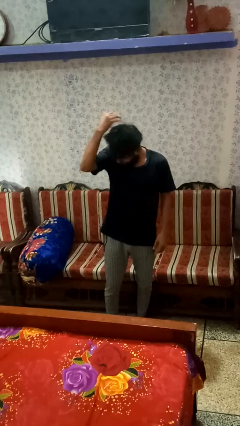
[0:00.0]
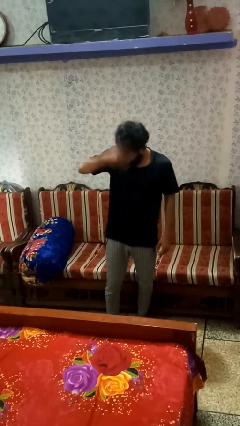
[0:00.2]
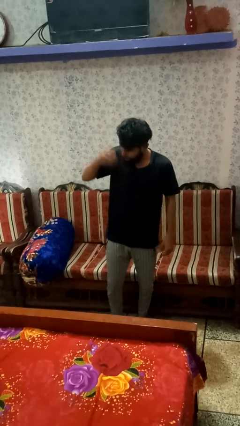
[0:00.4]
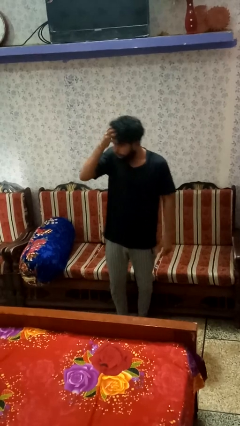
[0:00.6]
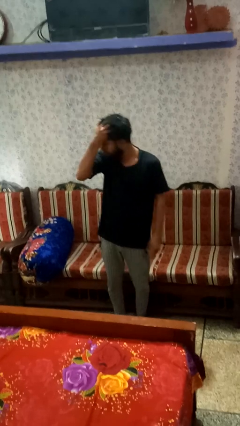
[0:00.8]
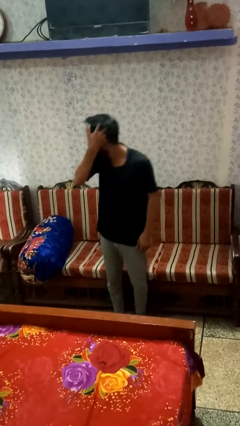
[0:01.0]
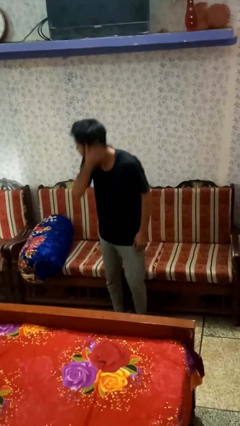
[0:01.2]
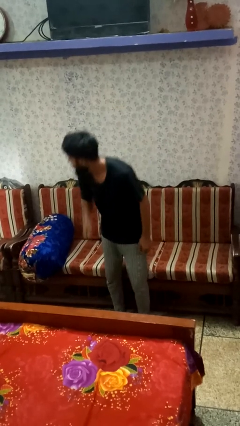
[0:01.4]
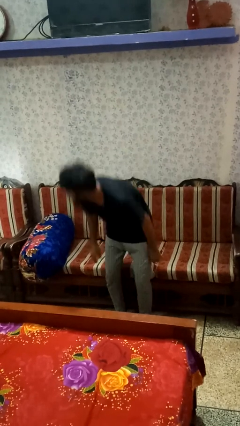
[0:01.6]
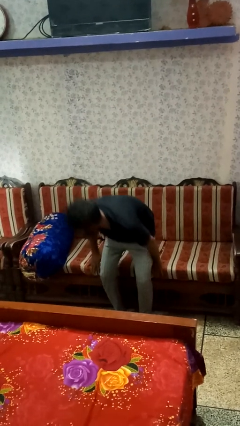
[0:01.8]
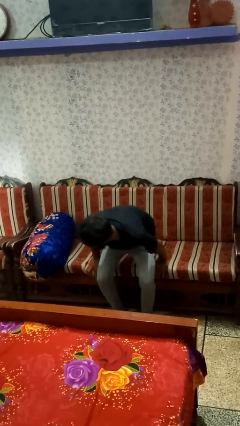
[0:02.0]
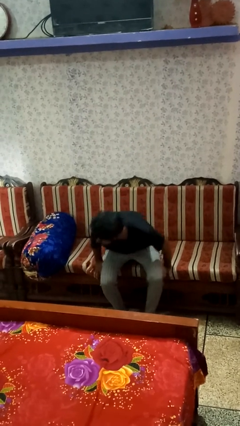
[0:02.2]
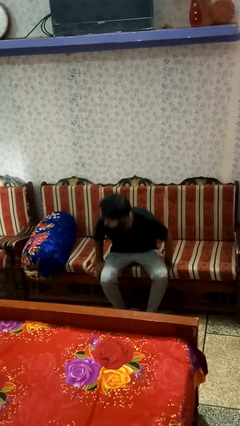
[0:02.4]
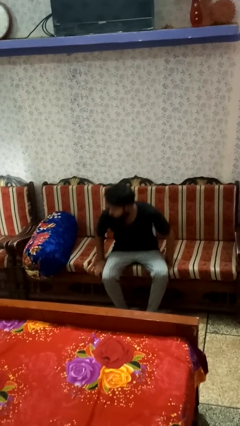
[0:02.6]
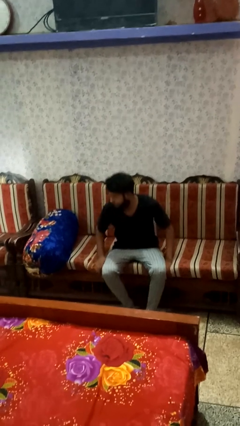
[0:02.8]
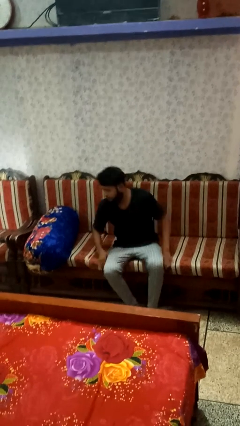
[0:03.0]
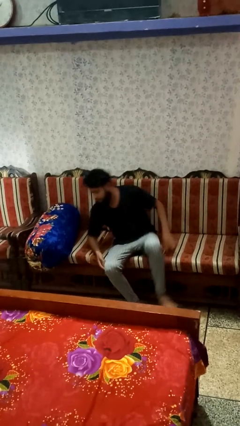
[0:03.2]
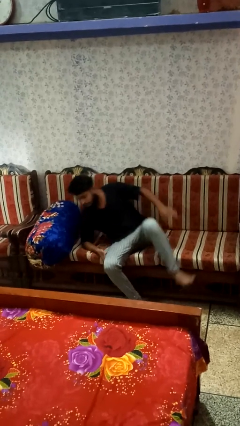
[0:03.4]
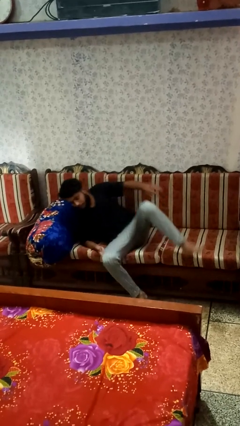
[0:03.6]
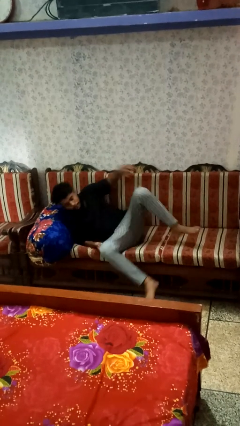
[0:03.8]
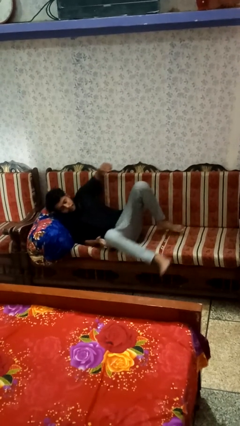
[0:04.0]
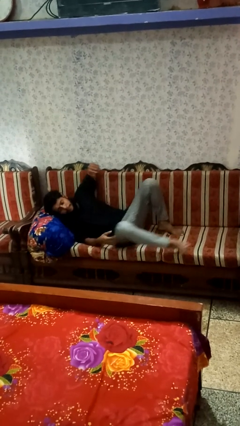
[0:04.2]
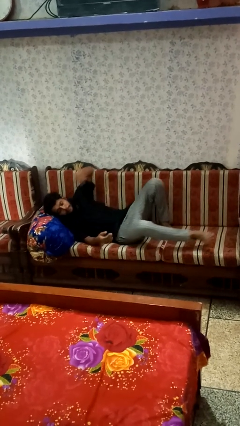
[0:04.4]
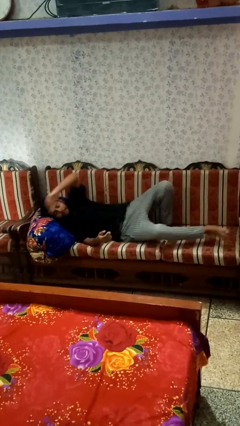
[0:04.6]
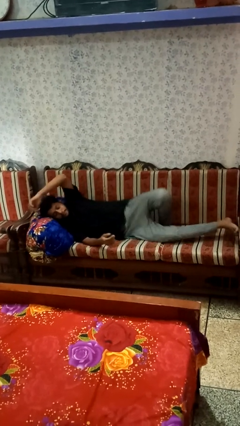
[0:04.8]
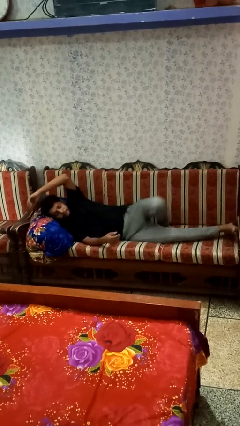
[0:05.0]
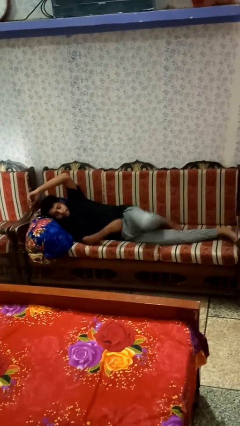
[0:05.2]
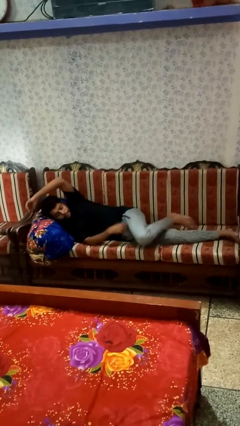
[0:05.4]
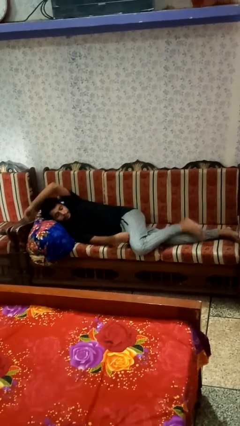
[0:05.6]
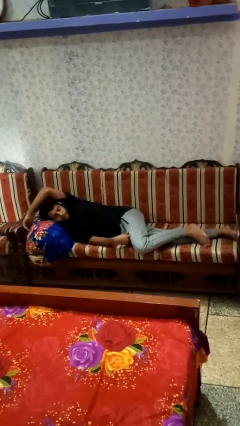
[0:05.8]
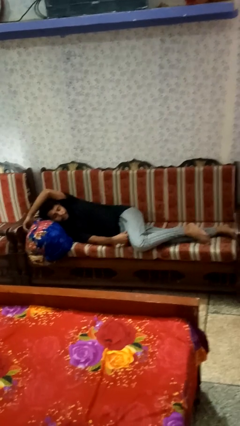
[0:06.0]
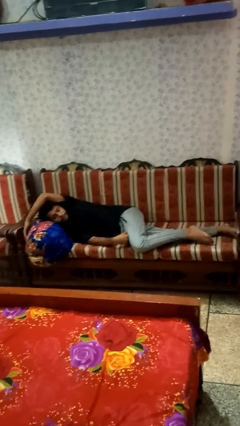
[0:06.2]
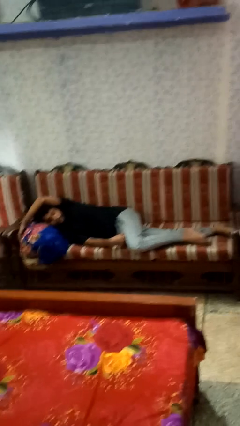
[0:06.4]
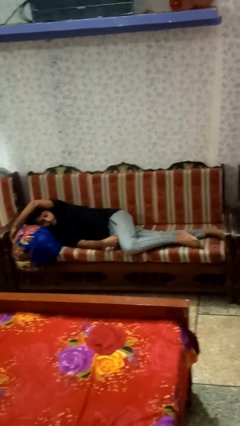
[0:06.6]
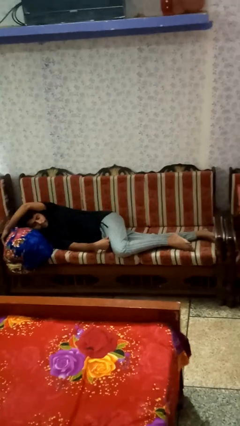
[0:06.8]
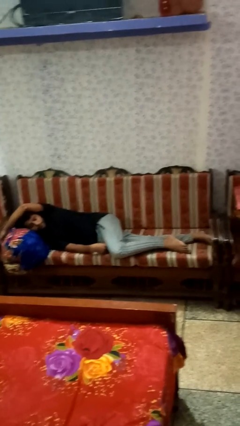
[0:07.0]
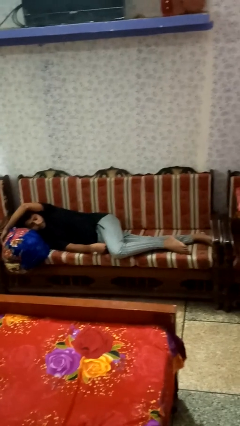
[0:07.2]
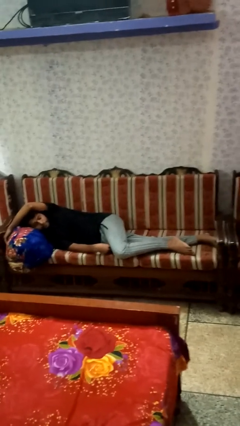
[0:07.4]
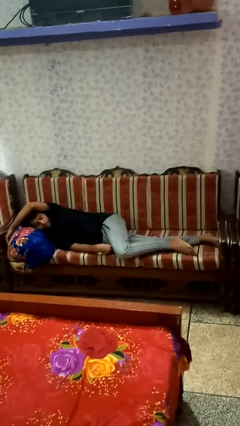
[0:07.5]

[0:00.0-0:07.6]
person lies down on couch

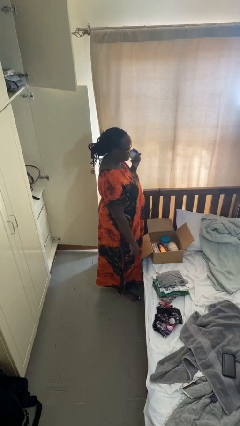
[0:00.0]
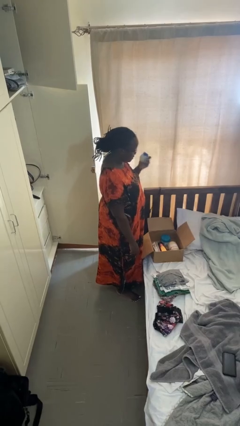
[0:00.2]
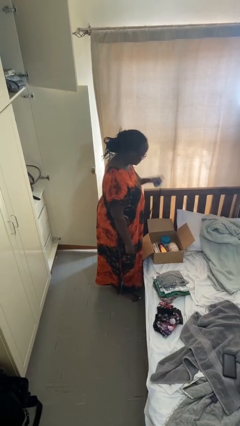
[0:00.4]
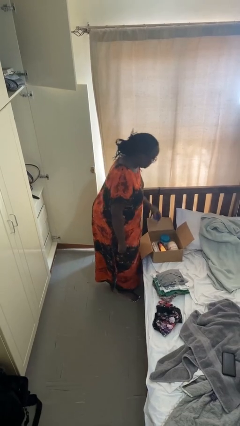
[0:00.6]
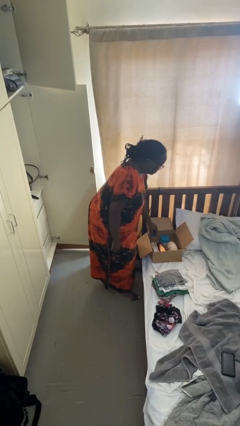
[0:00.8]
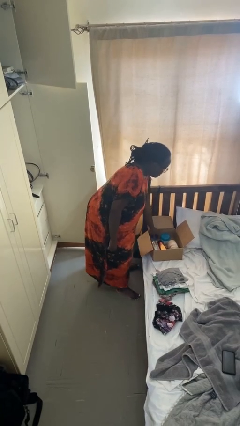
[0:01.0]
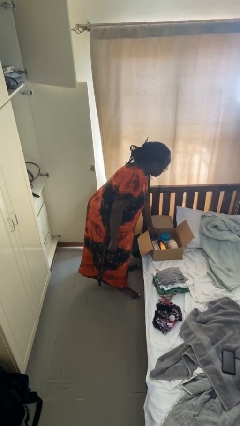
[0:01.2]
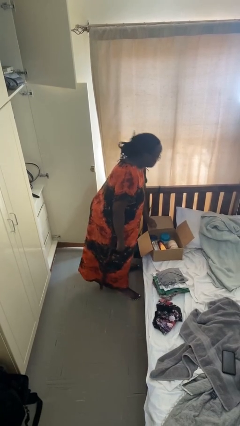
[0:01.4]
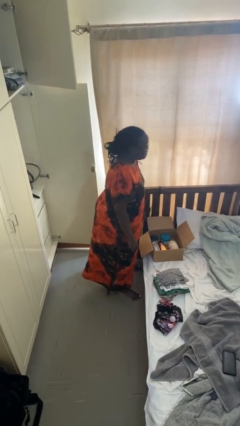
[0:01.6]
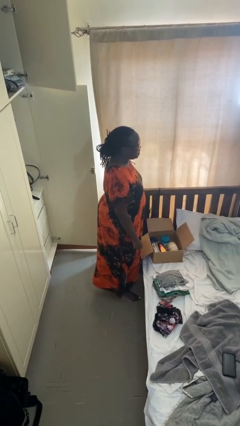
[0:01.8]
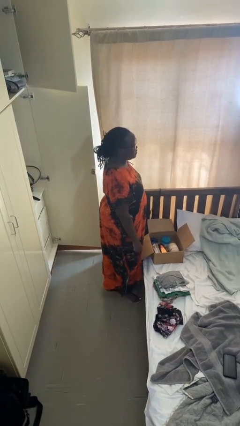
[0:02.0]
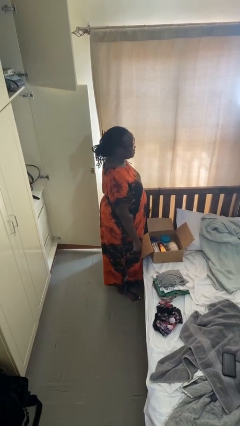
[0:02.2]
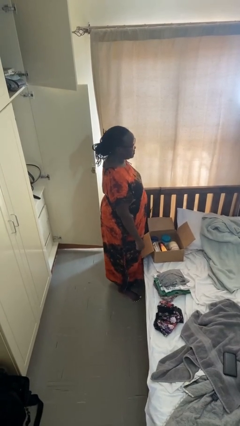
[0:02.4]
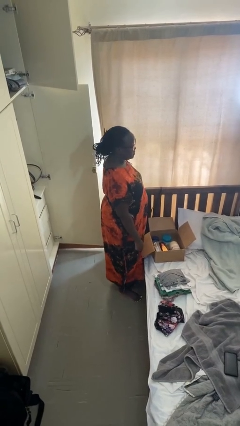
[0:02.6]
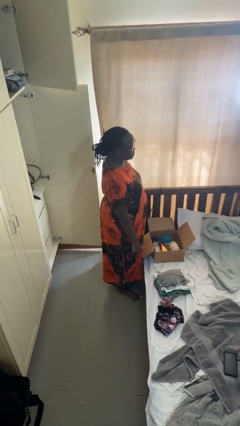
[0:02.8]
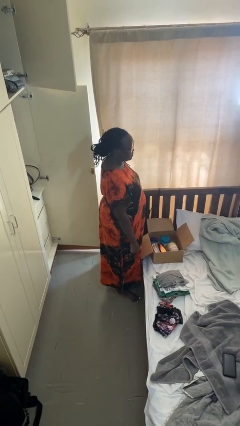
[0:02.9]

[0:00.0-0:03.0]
person puts object into box

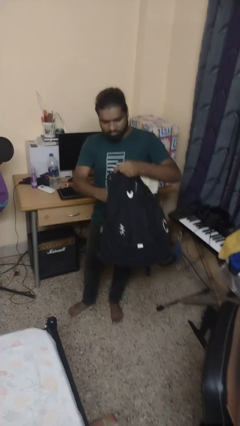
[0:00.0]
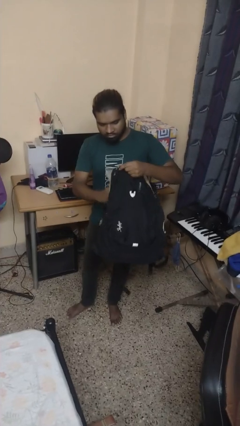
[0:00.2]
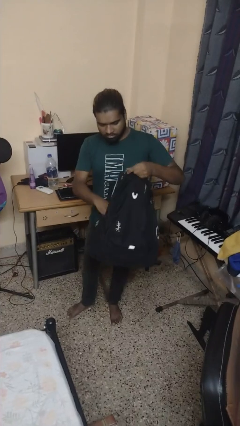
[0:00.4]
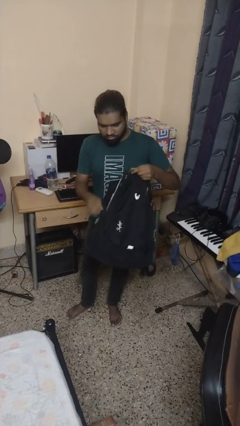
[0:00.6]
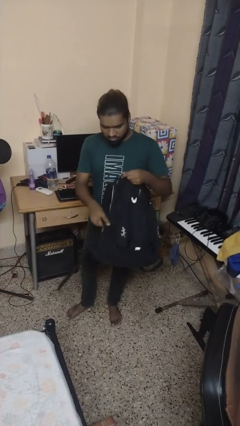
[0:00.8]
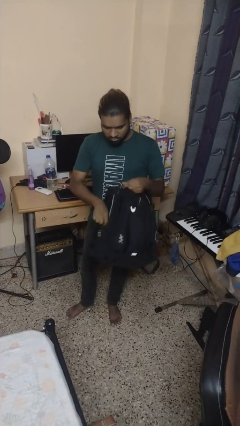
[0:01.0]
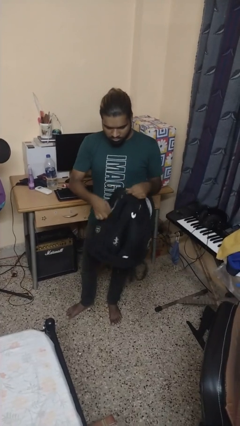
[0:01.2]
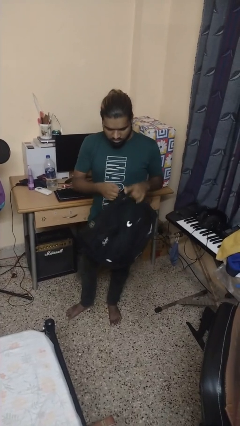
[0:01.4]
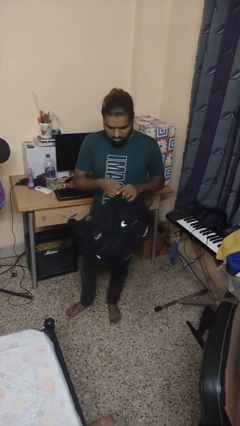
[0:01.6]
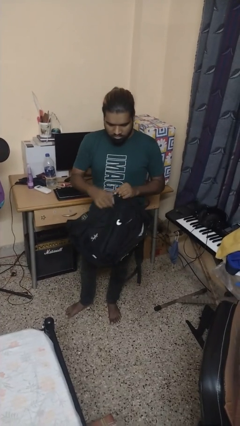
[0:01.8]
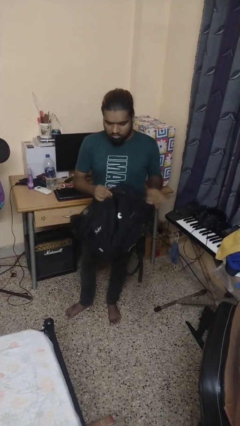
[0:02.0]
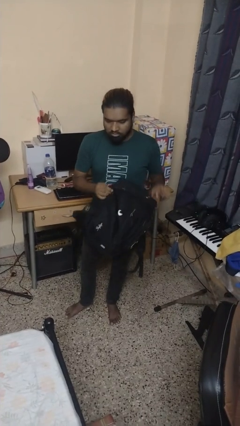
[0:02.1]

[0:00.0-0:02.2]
person puts object into backpack

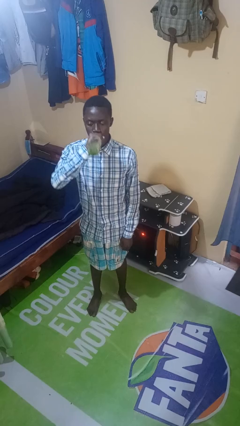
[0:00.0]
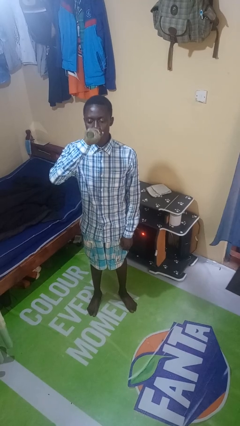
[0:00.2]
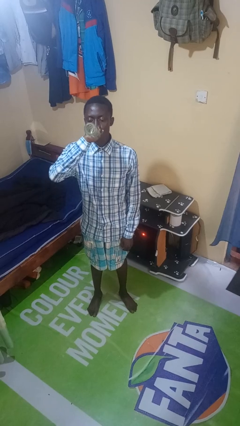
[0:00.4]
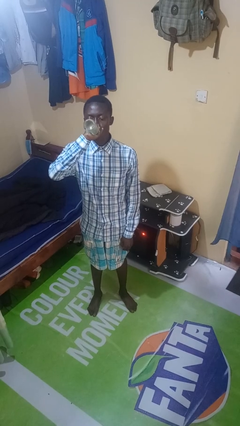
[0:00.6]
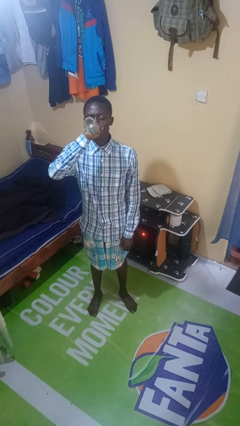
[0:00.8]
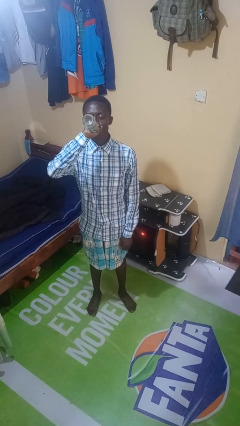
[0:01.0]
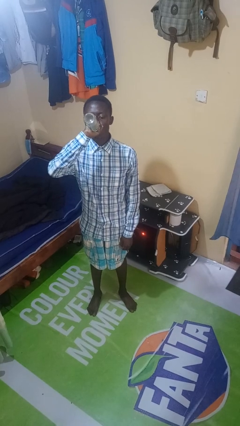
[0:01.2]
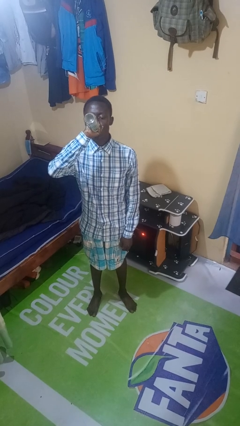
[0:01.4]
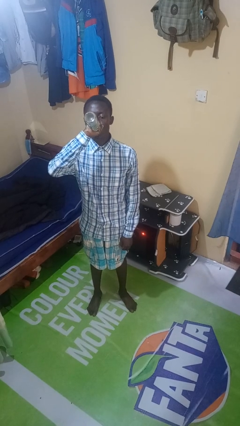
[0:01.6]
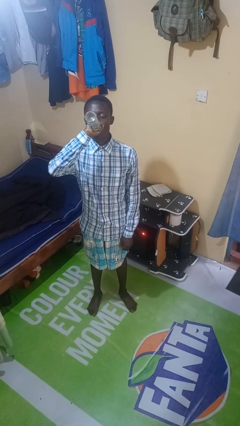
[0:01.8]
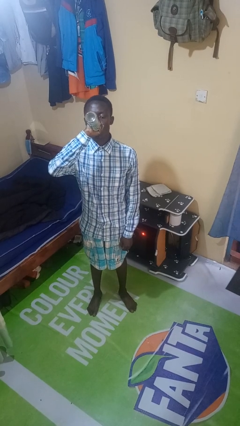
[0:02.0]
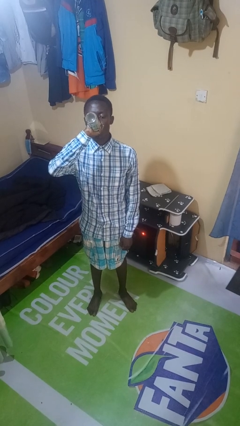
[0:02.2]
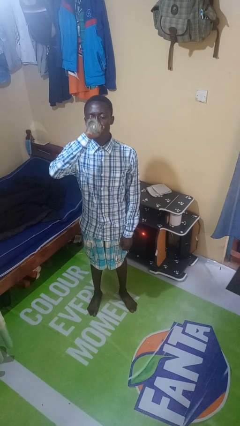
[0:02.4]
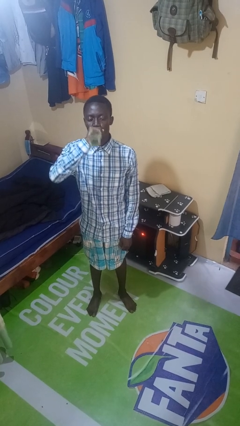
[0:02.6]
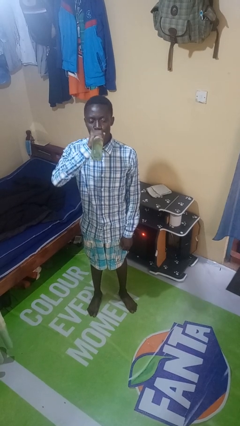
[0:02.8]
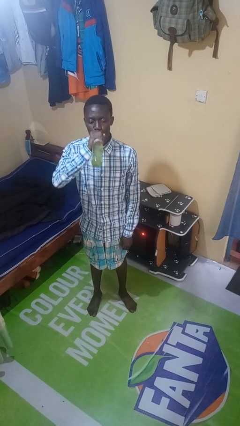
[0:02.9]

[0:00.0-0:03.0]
person drinks from bottle

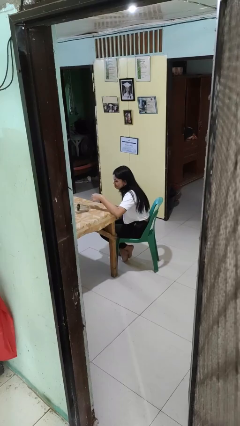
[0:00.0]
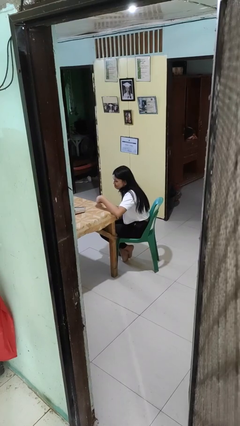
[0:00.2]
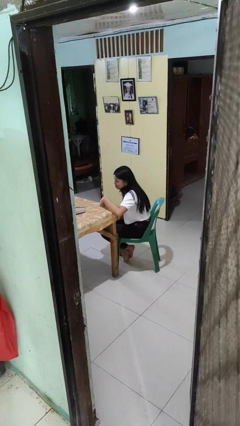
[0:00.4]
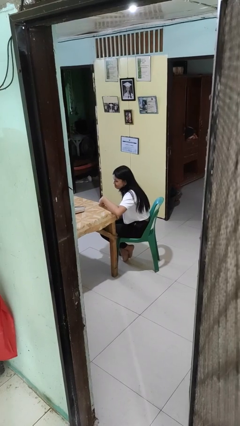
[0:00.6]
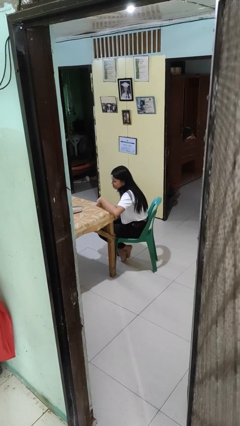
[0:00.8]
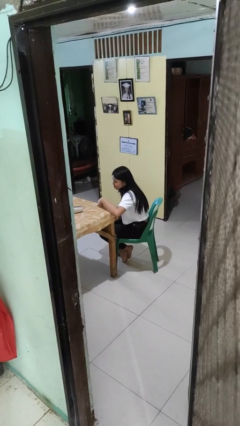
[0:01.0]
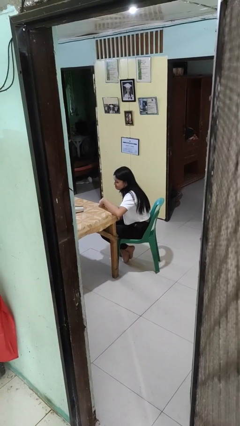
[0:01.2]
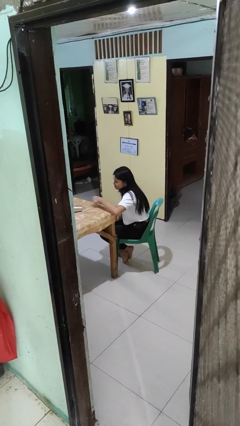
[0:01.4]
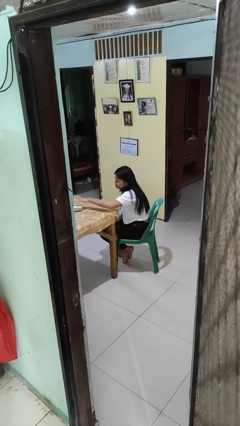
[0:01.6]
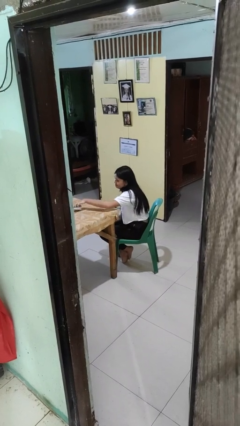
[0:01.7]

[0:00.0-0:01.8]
person knocks over glass

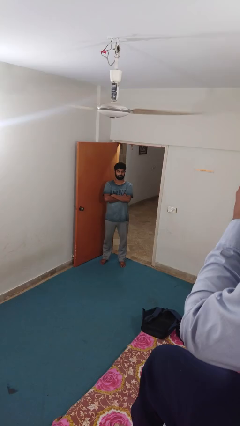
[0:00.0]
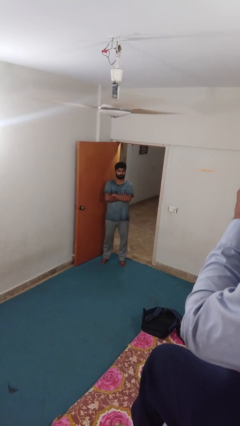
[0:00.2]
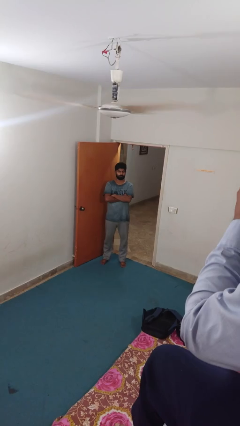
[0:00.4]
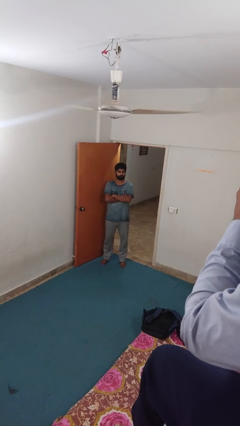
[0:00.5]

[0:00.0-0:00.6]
person crosses arms
